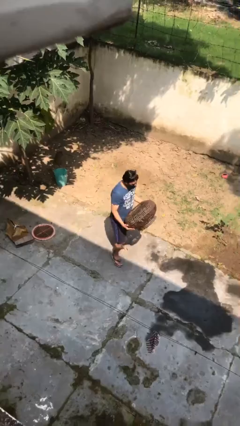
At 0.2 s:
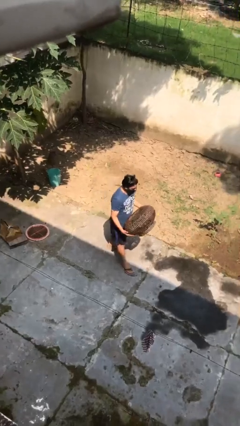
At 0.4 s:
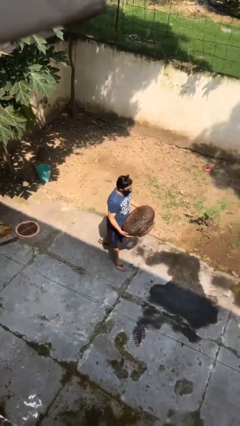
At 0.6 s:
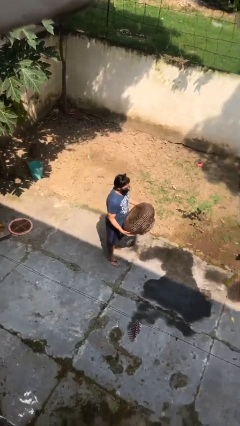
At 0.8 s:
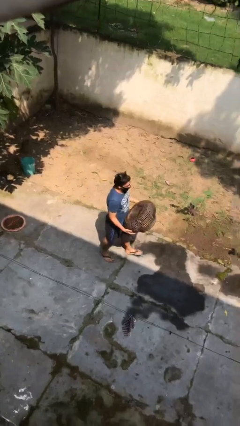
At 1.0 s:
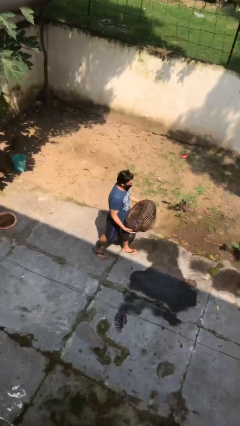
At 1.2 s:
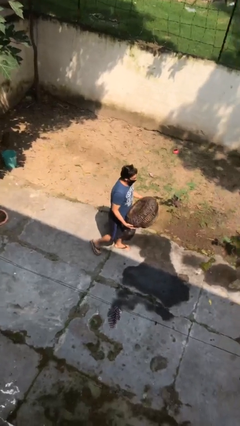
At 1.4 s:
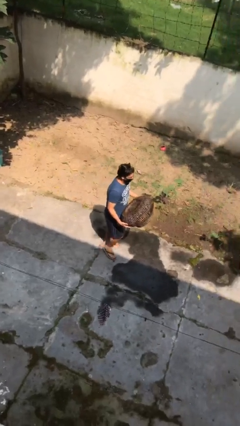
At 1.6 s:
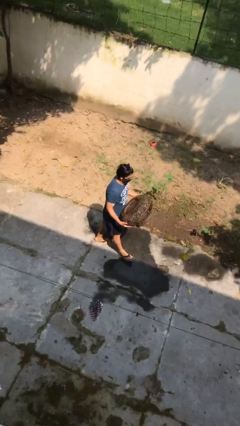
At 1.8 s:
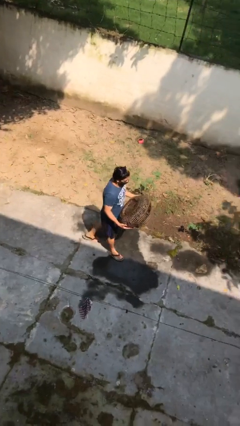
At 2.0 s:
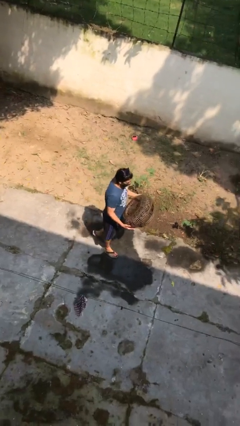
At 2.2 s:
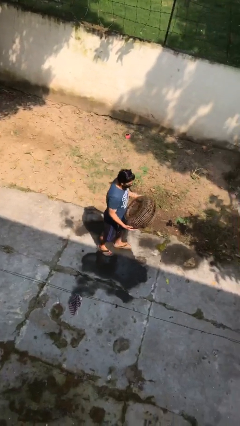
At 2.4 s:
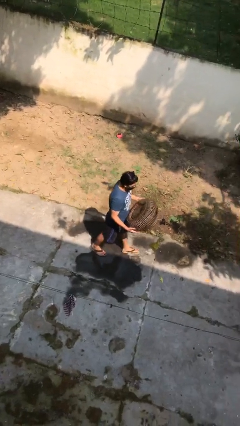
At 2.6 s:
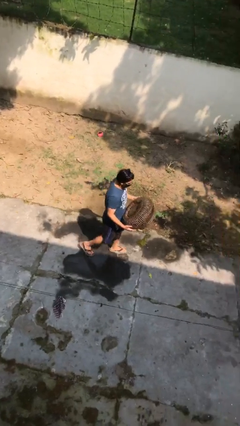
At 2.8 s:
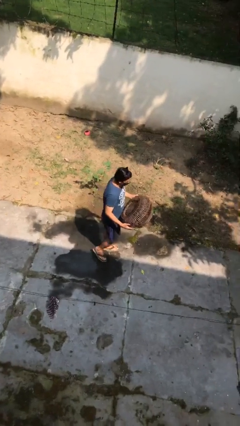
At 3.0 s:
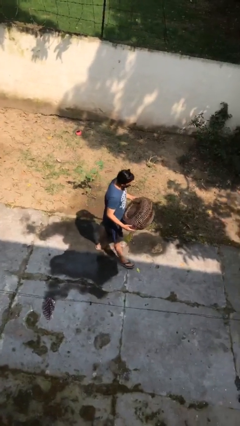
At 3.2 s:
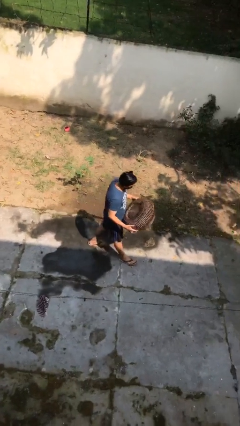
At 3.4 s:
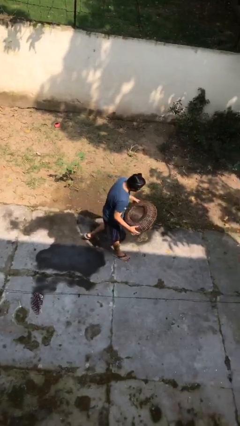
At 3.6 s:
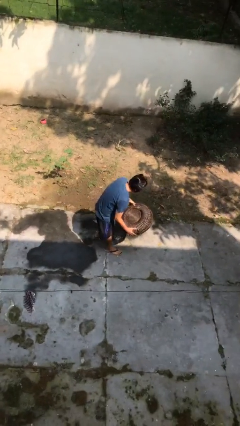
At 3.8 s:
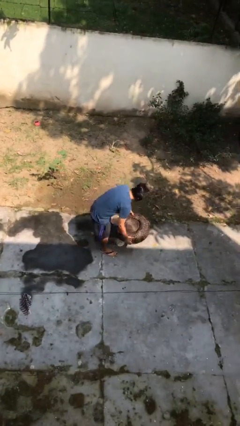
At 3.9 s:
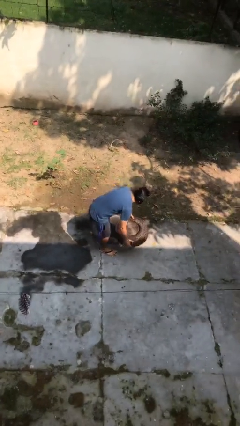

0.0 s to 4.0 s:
person carries heavy object

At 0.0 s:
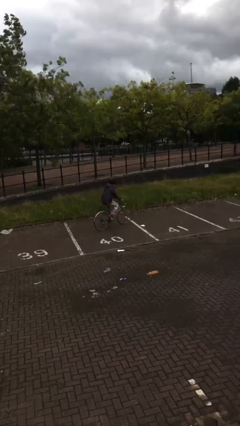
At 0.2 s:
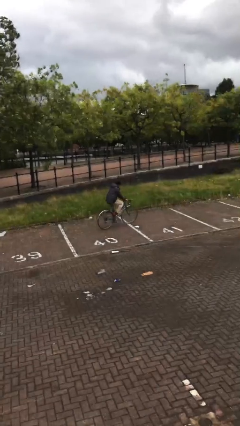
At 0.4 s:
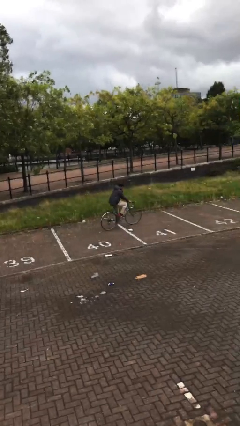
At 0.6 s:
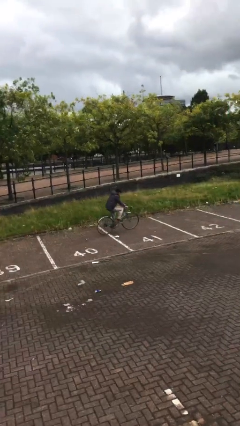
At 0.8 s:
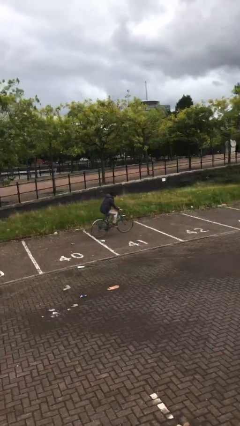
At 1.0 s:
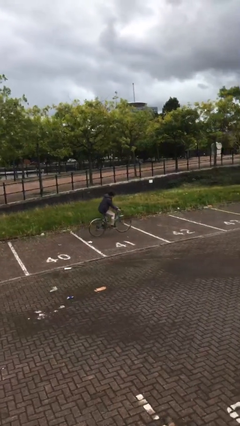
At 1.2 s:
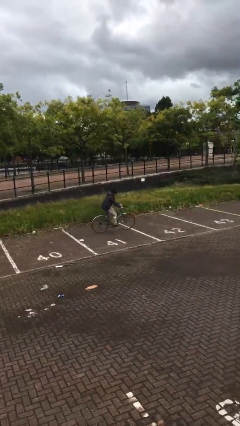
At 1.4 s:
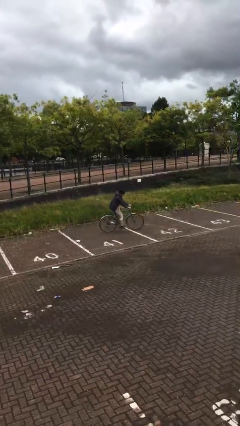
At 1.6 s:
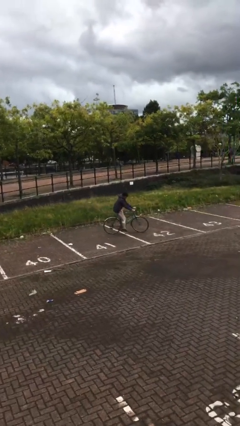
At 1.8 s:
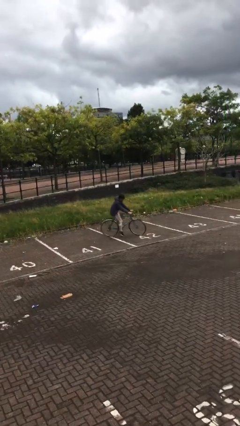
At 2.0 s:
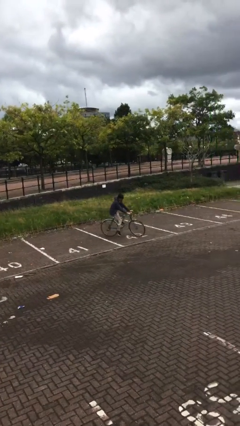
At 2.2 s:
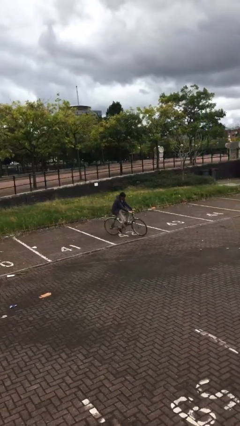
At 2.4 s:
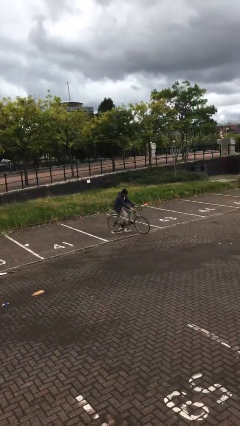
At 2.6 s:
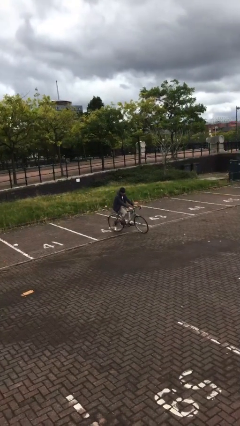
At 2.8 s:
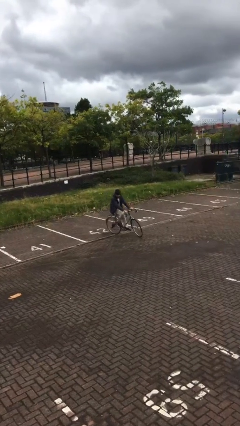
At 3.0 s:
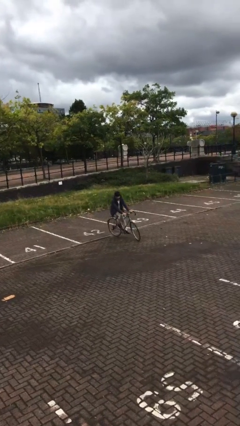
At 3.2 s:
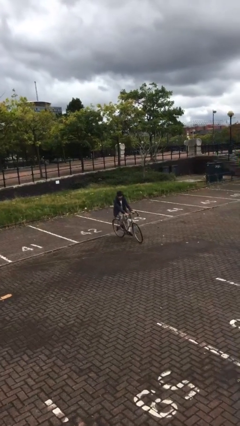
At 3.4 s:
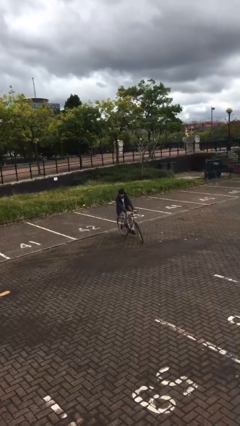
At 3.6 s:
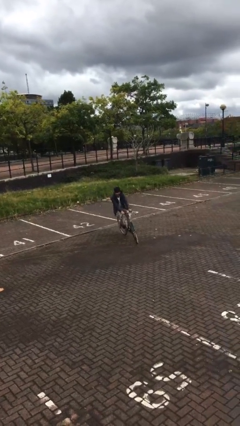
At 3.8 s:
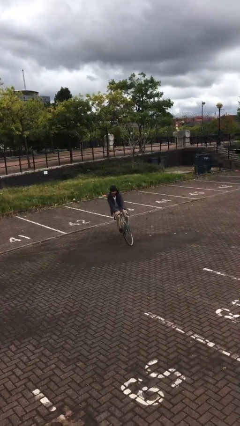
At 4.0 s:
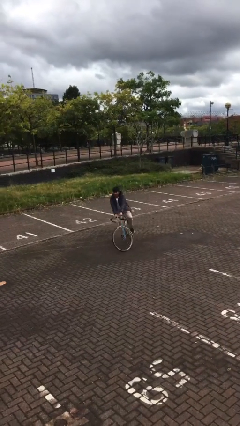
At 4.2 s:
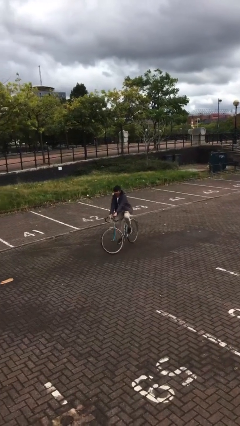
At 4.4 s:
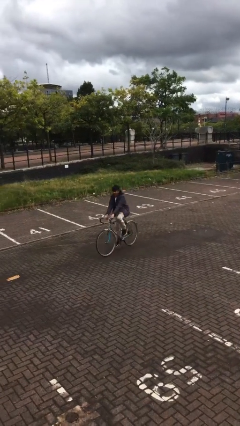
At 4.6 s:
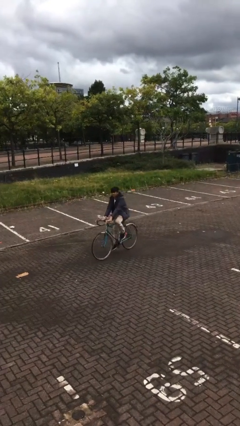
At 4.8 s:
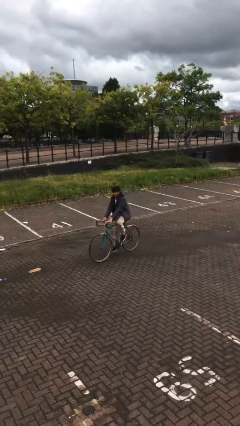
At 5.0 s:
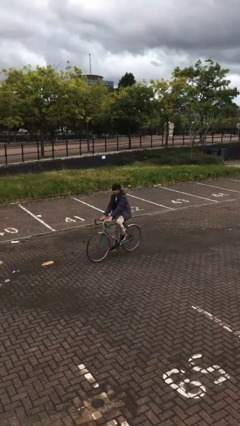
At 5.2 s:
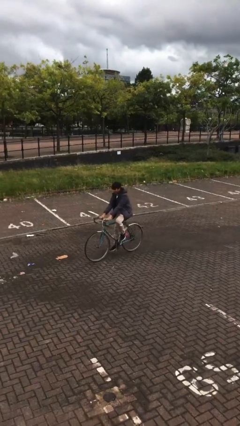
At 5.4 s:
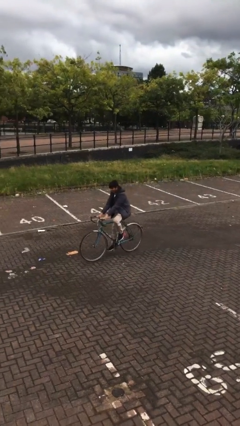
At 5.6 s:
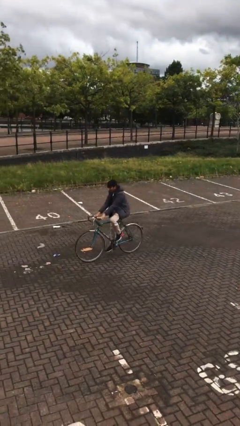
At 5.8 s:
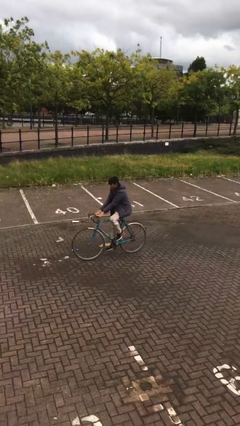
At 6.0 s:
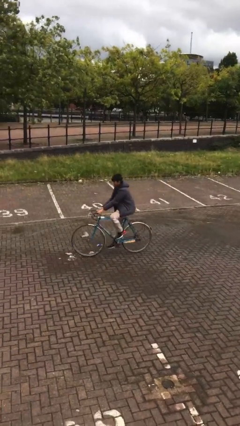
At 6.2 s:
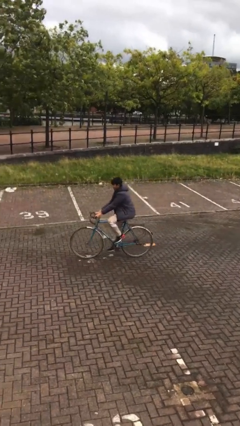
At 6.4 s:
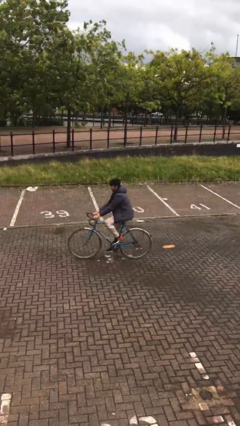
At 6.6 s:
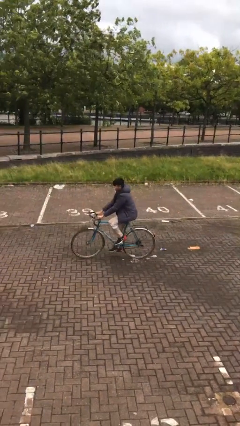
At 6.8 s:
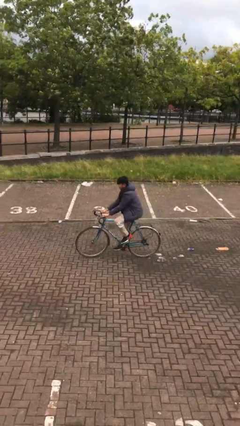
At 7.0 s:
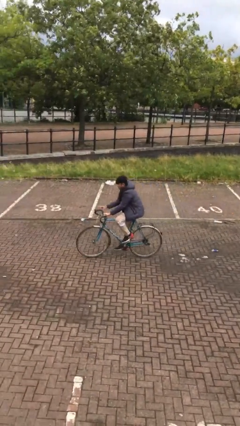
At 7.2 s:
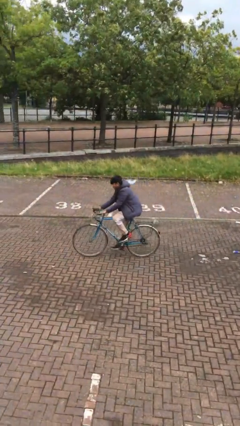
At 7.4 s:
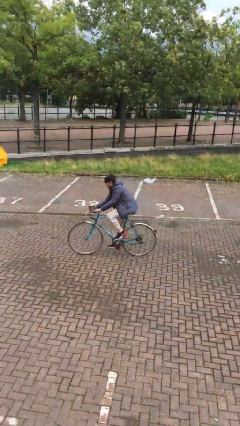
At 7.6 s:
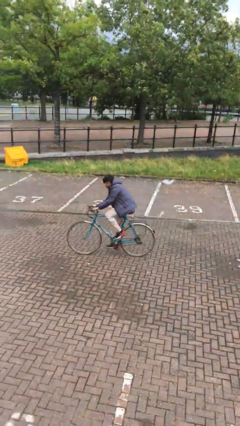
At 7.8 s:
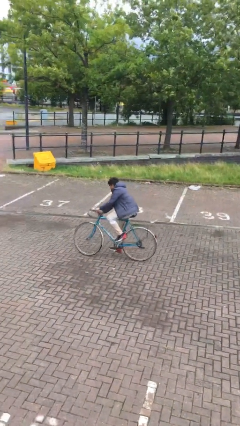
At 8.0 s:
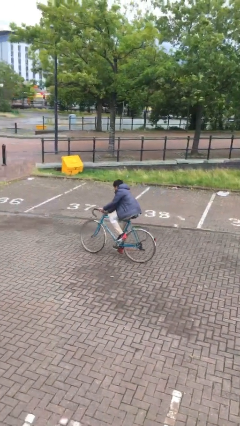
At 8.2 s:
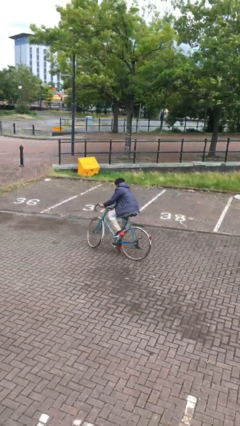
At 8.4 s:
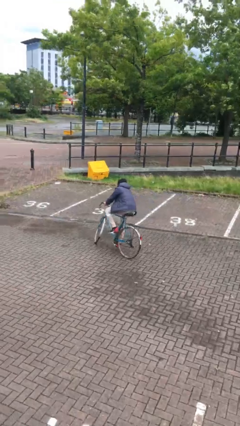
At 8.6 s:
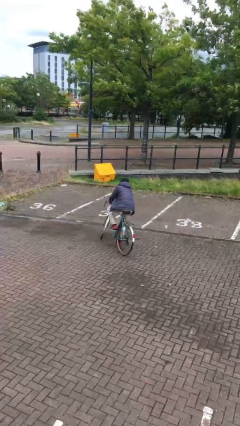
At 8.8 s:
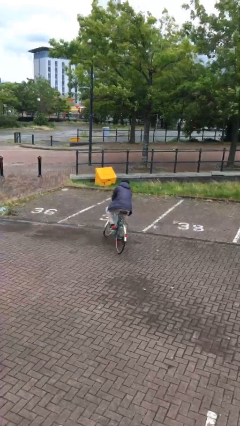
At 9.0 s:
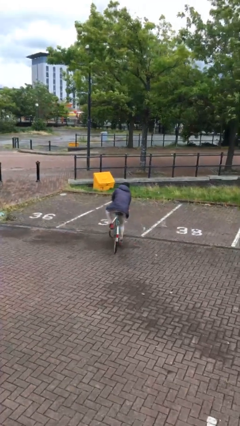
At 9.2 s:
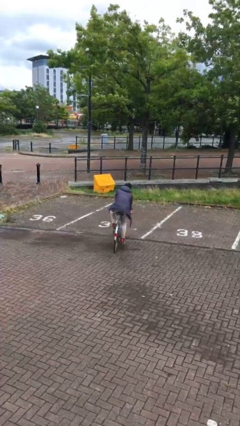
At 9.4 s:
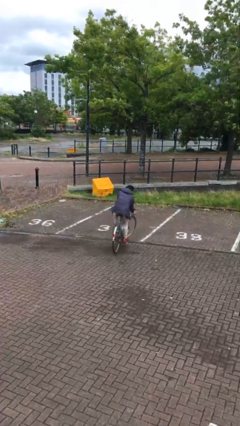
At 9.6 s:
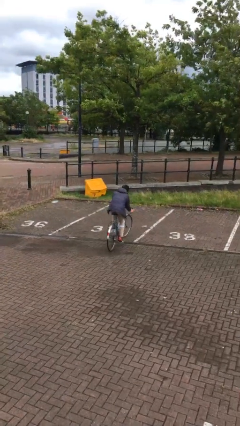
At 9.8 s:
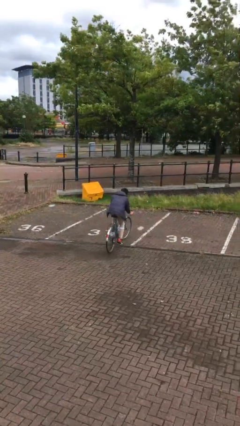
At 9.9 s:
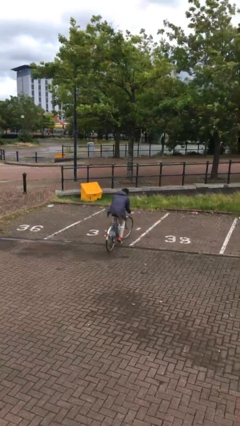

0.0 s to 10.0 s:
person rides bicycle

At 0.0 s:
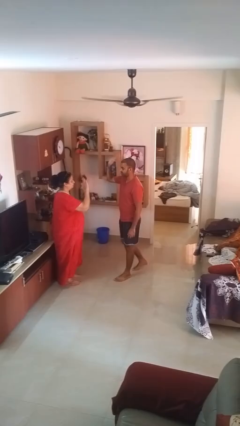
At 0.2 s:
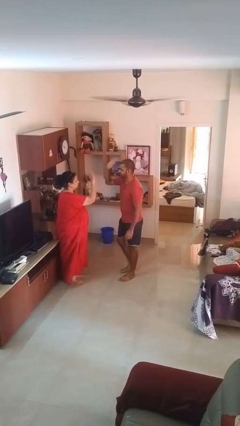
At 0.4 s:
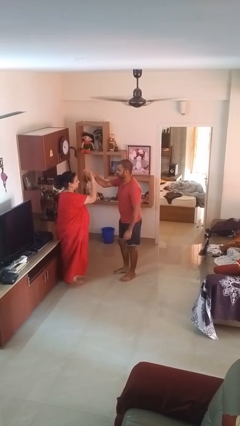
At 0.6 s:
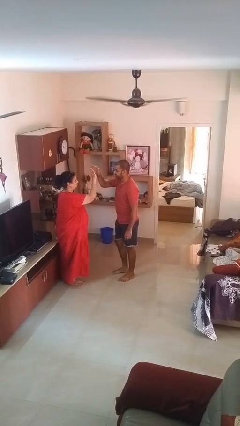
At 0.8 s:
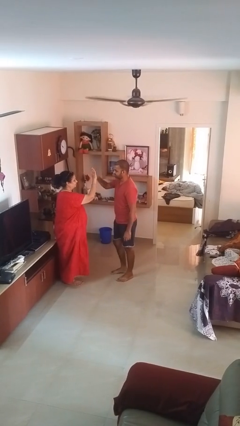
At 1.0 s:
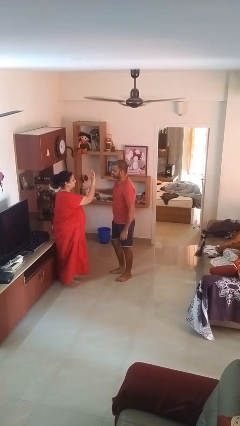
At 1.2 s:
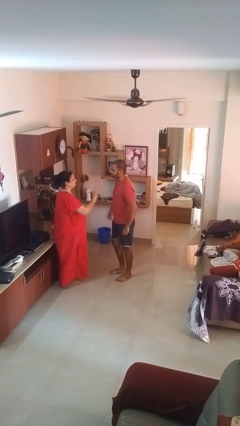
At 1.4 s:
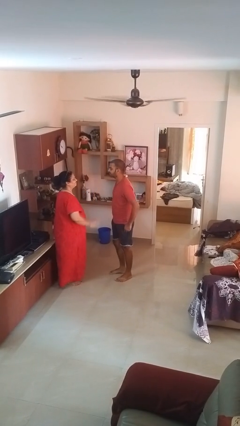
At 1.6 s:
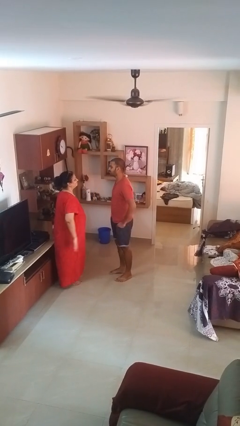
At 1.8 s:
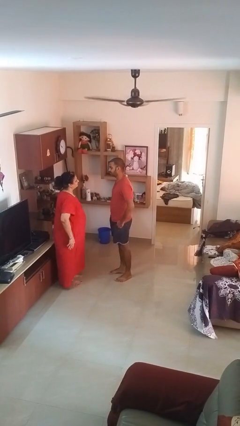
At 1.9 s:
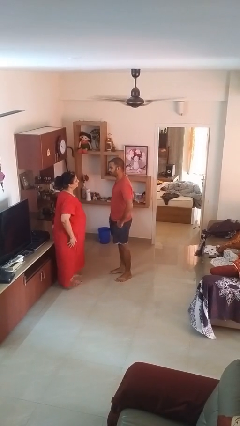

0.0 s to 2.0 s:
person highfives hand

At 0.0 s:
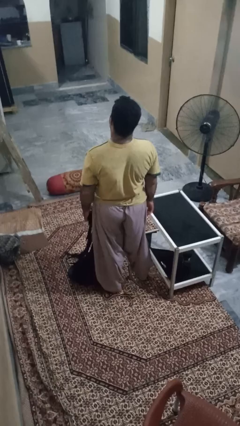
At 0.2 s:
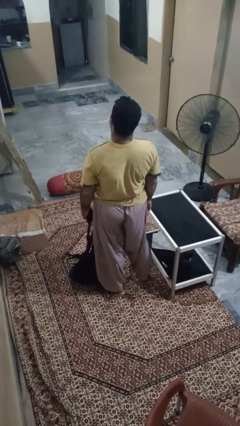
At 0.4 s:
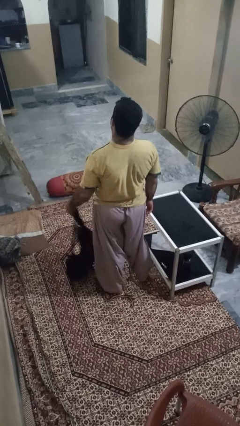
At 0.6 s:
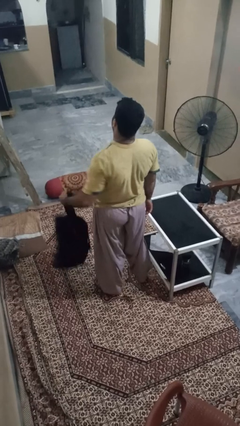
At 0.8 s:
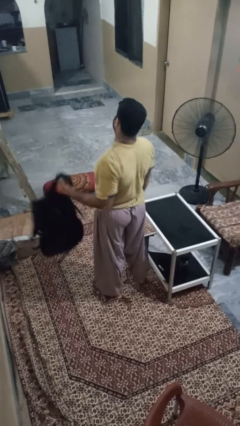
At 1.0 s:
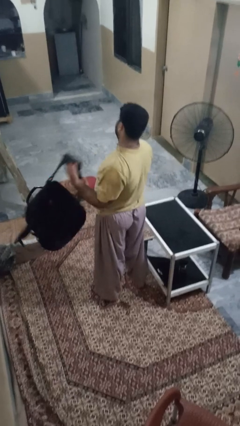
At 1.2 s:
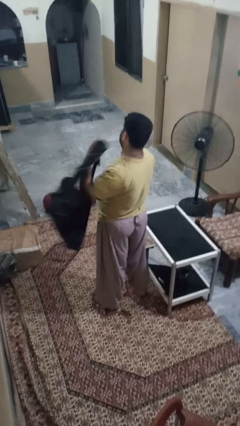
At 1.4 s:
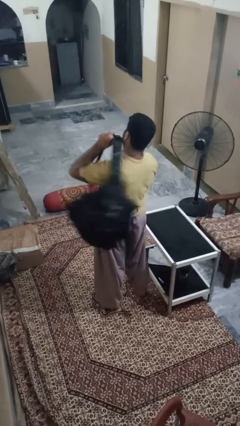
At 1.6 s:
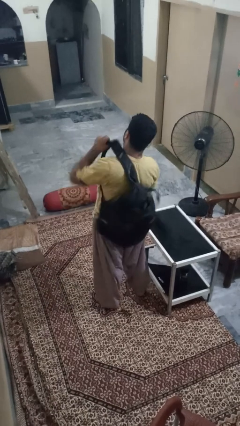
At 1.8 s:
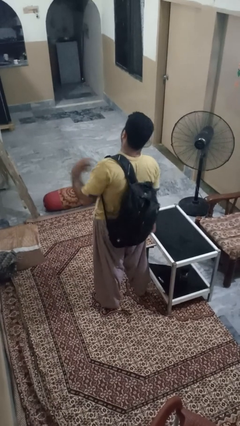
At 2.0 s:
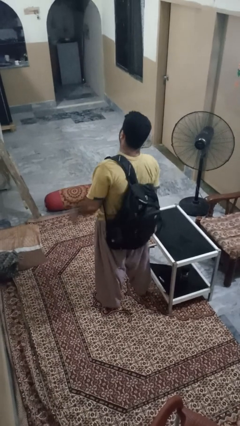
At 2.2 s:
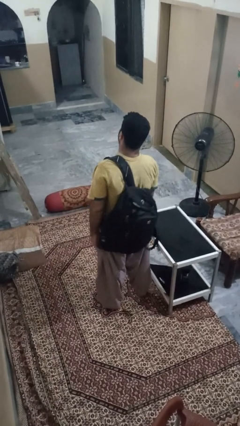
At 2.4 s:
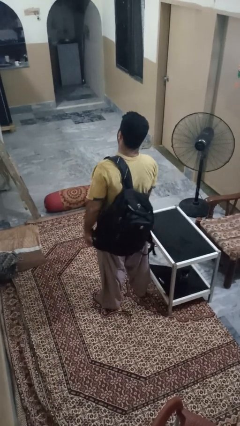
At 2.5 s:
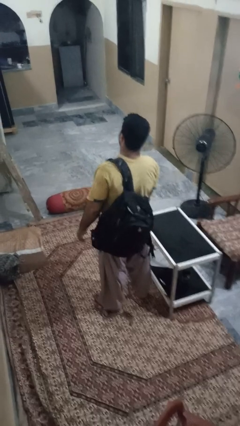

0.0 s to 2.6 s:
person puts on backpack
